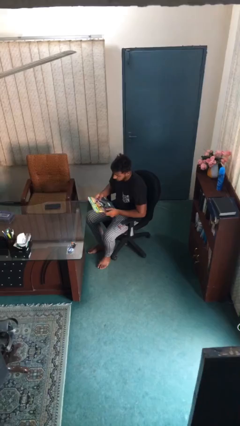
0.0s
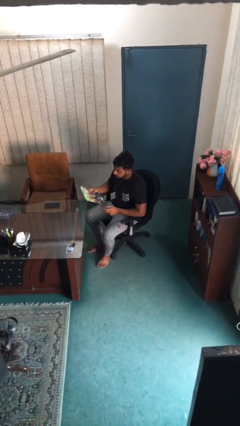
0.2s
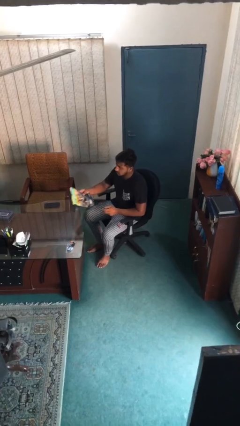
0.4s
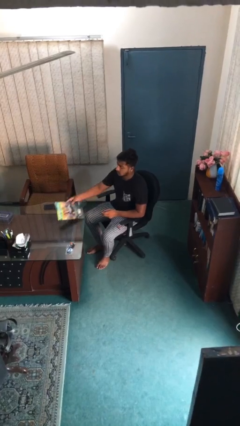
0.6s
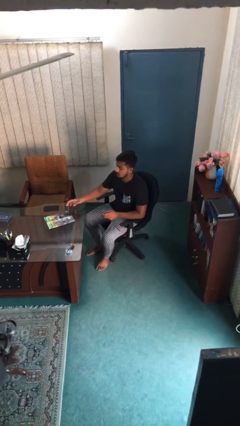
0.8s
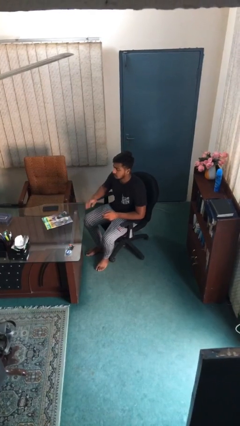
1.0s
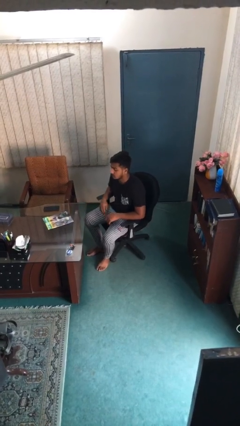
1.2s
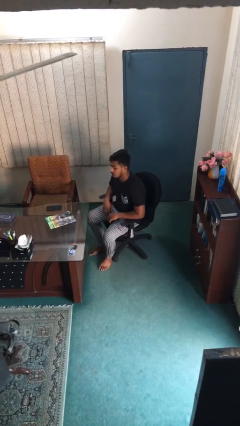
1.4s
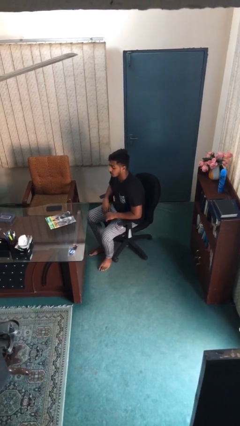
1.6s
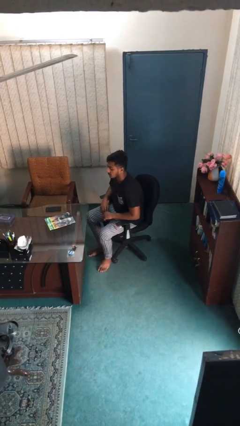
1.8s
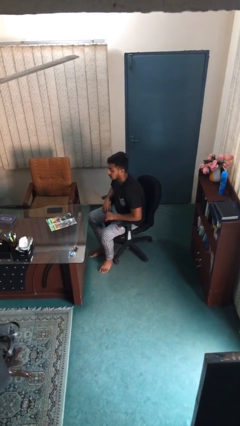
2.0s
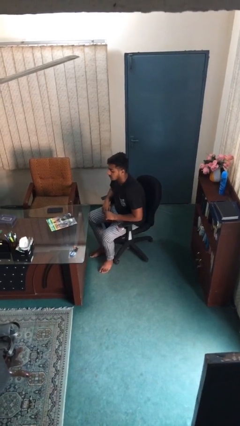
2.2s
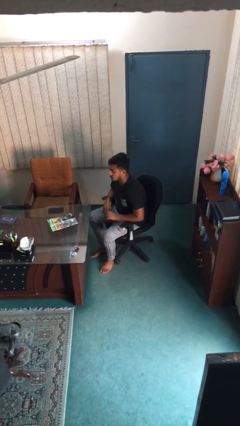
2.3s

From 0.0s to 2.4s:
person puts down object on table

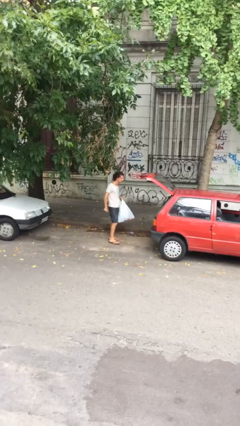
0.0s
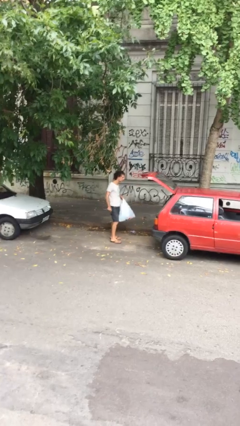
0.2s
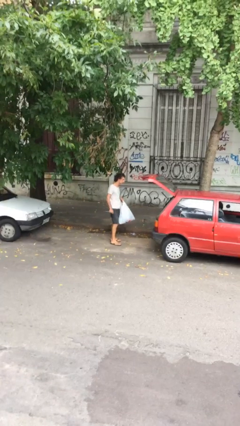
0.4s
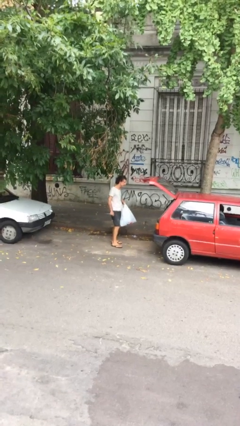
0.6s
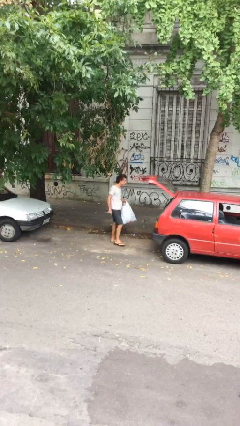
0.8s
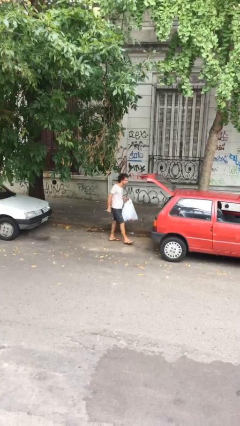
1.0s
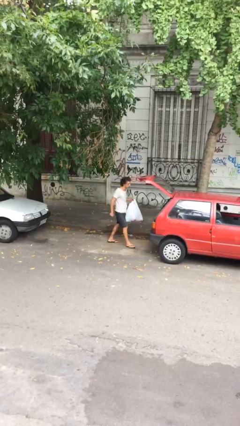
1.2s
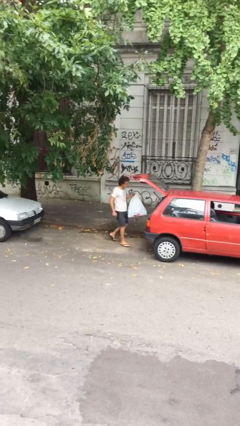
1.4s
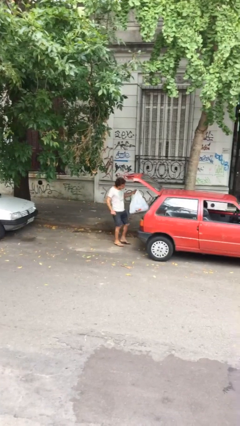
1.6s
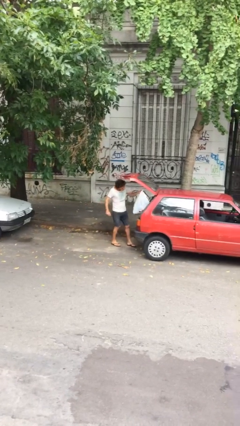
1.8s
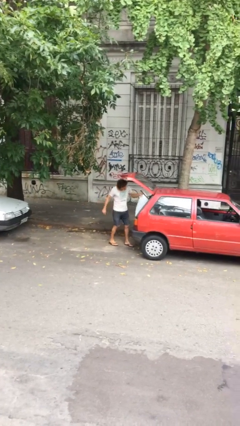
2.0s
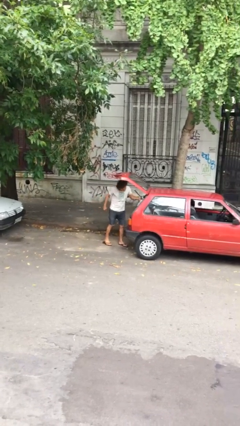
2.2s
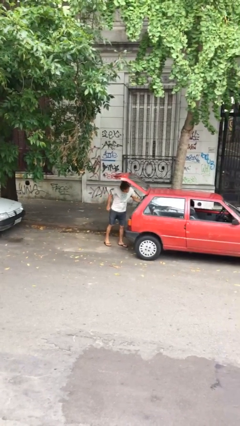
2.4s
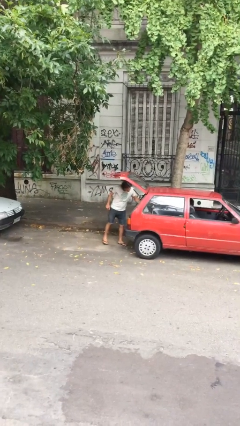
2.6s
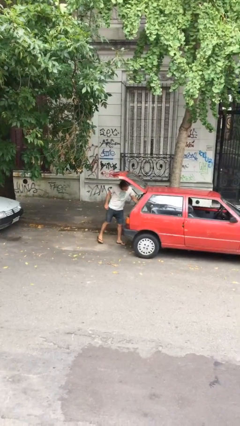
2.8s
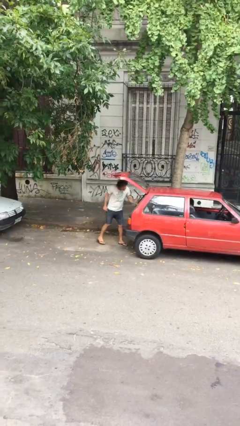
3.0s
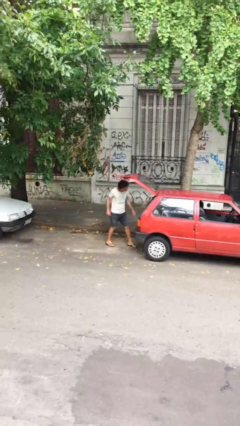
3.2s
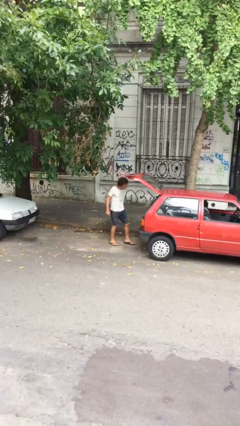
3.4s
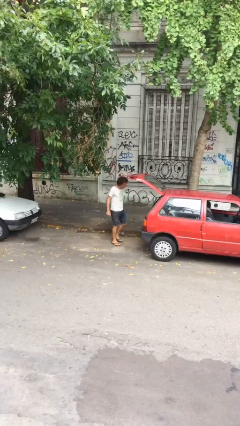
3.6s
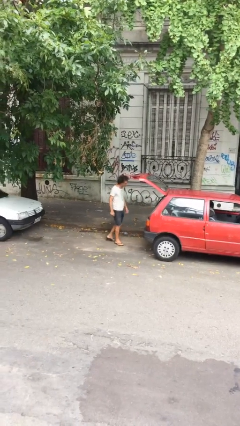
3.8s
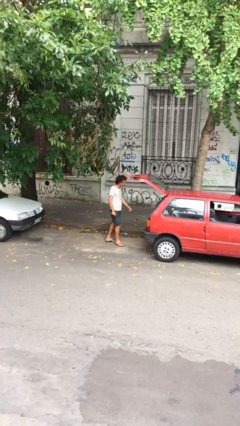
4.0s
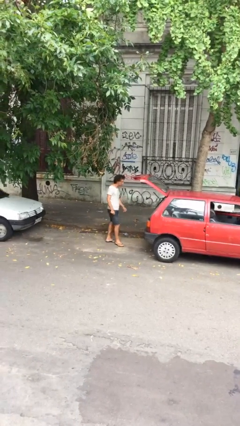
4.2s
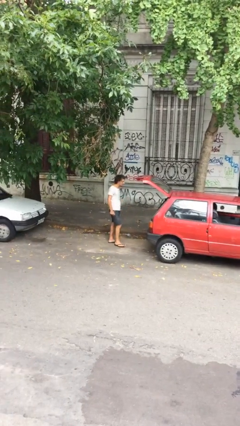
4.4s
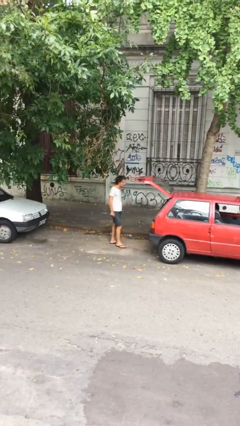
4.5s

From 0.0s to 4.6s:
person loads car

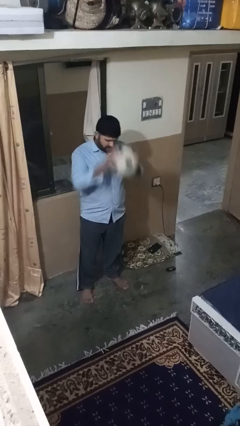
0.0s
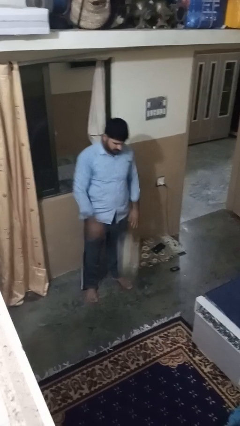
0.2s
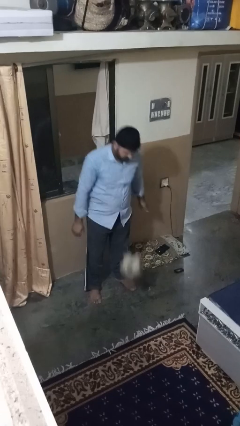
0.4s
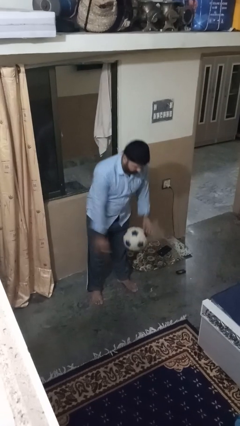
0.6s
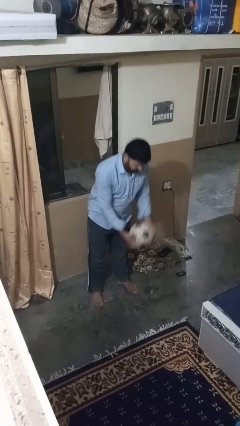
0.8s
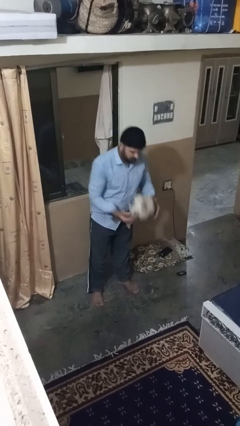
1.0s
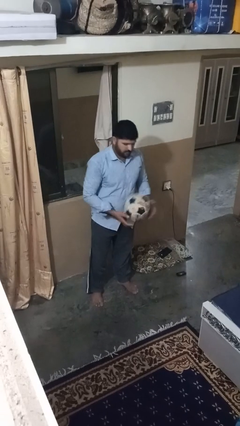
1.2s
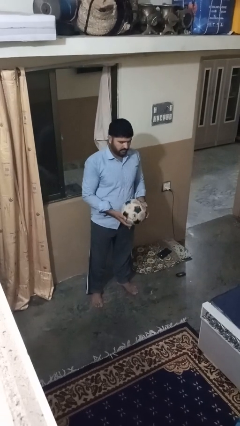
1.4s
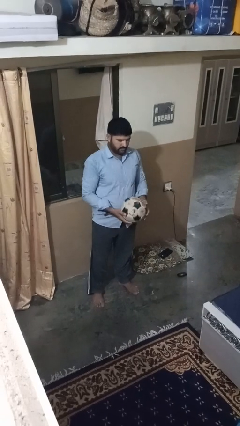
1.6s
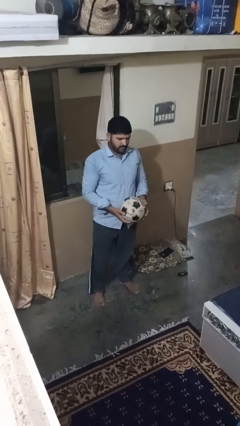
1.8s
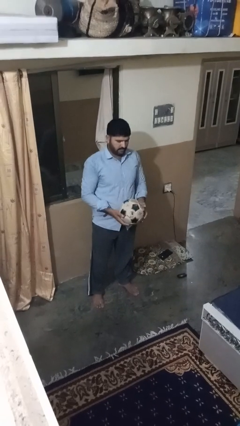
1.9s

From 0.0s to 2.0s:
person bounces ball on floor

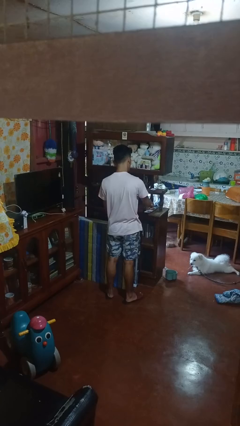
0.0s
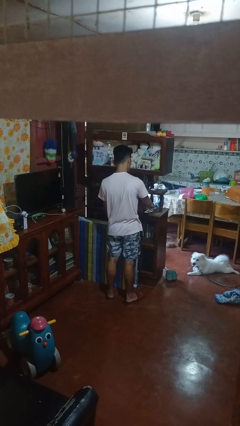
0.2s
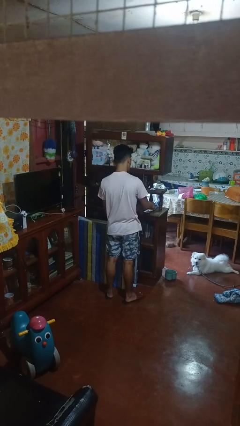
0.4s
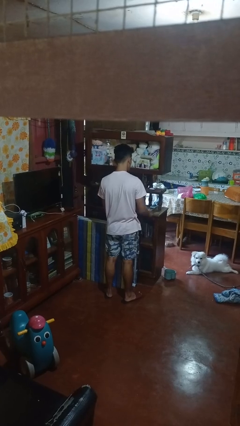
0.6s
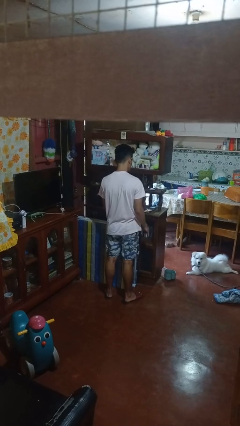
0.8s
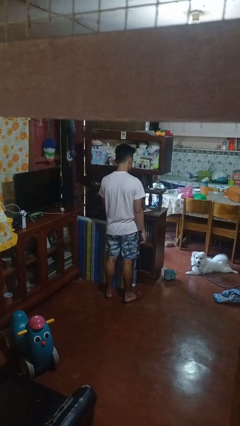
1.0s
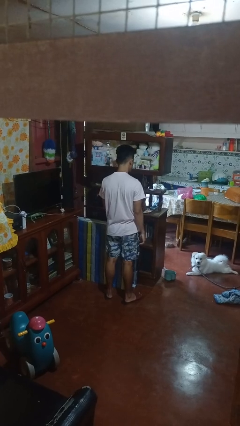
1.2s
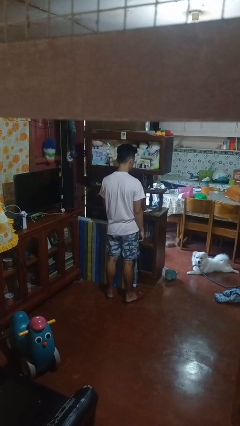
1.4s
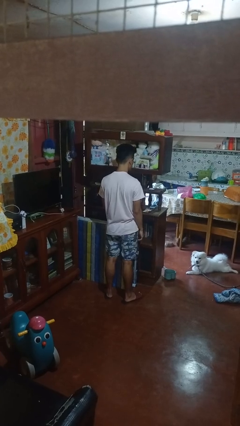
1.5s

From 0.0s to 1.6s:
person puts down object on shelf

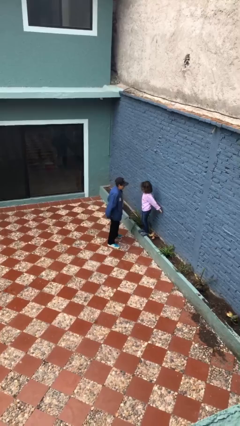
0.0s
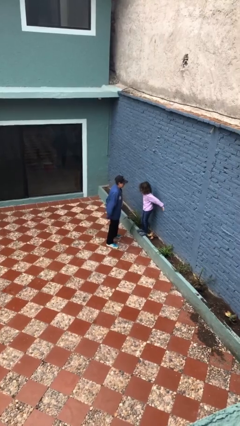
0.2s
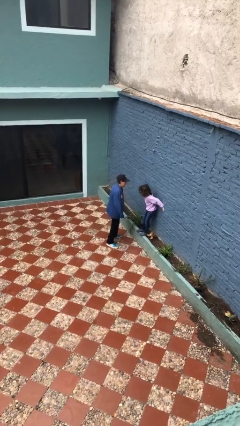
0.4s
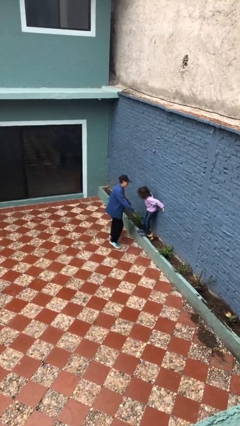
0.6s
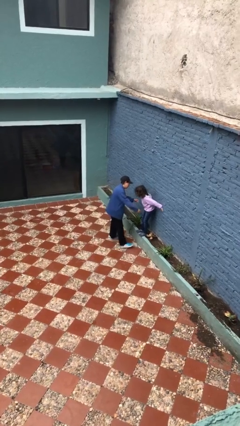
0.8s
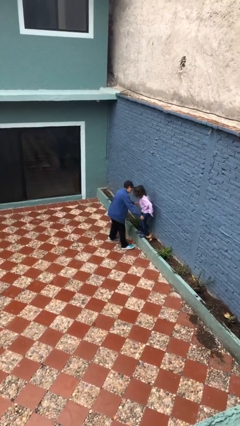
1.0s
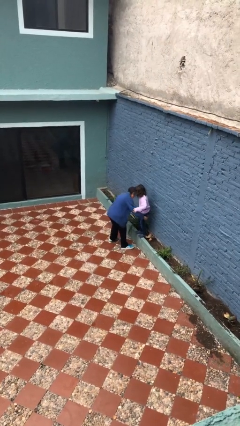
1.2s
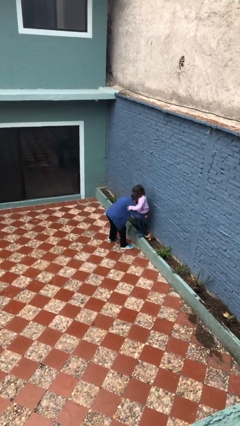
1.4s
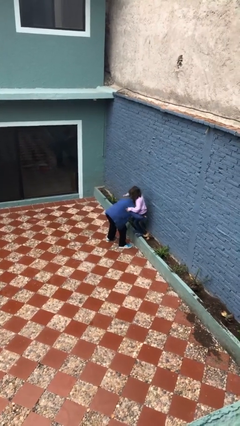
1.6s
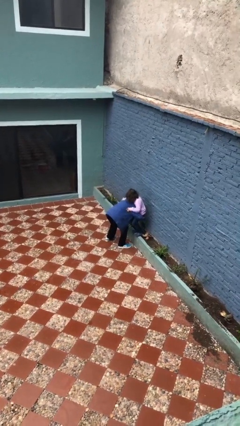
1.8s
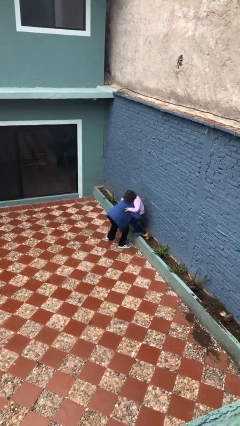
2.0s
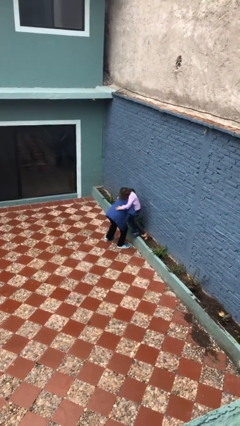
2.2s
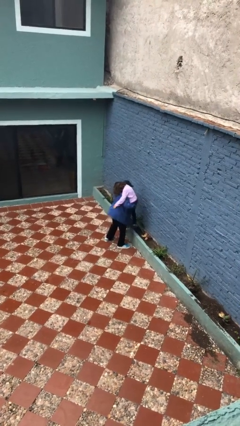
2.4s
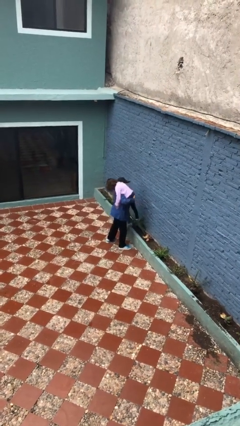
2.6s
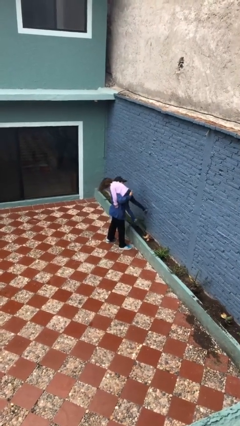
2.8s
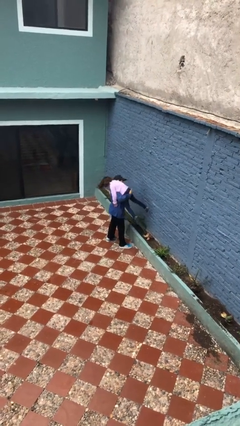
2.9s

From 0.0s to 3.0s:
person carries person over shoulder

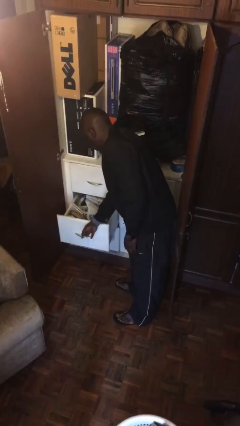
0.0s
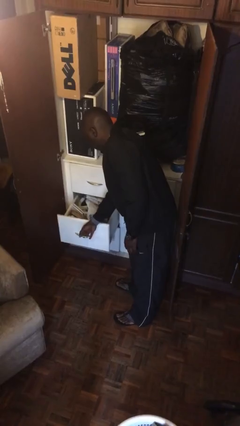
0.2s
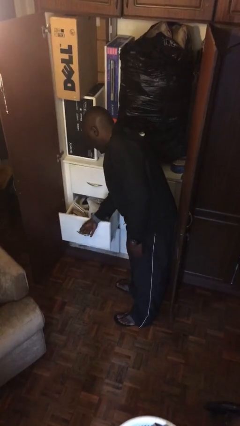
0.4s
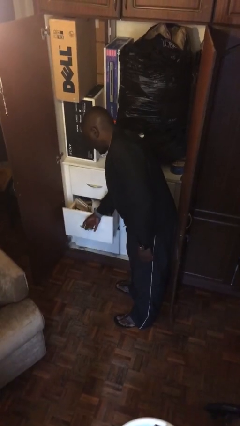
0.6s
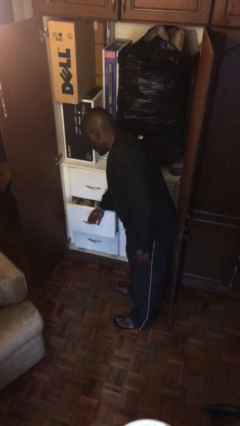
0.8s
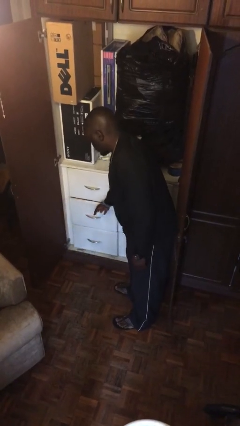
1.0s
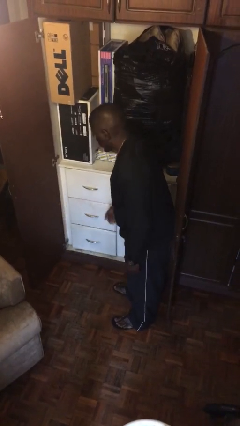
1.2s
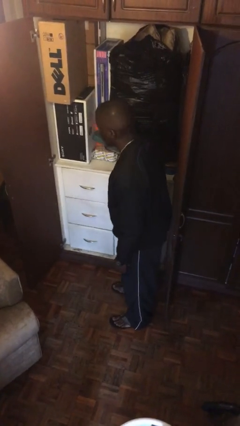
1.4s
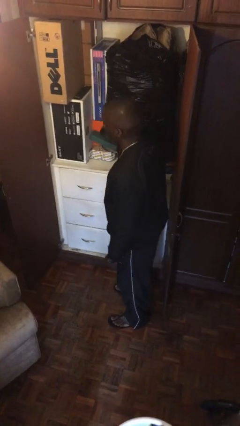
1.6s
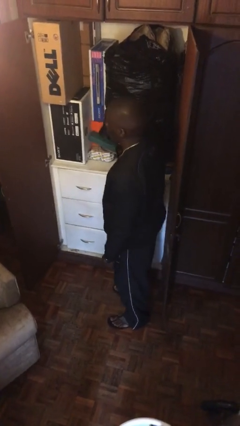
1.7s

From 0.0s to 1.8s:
person closes dresser drawer

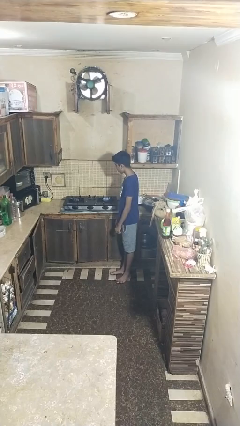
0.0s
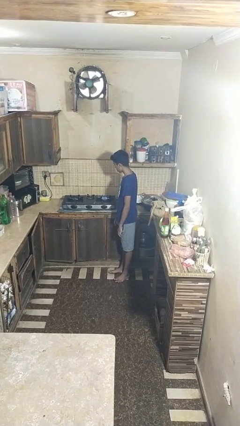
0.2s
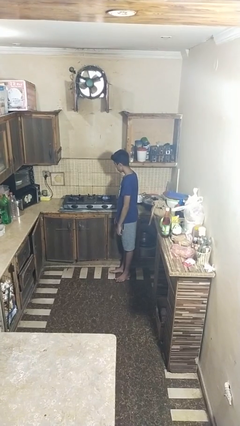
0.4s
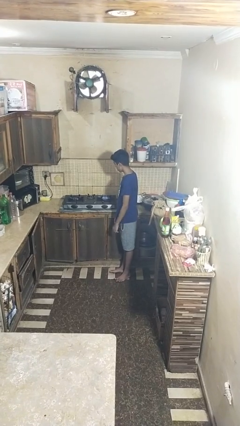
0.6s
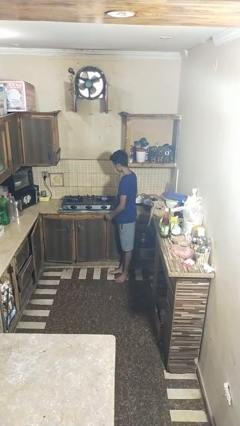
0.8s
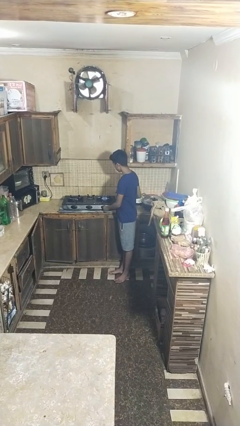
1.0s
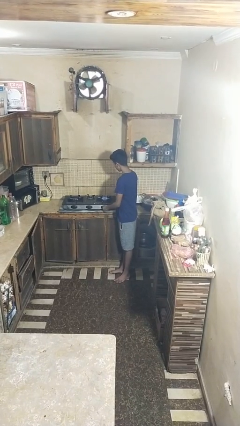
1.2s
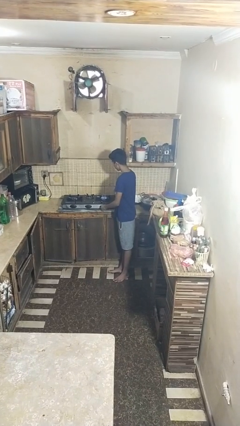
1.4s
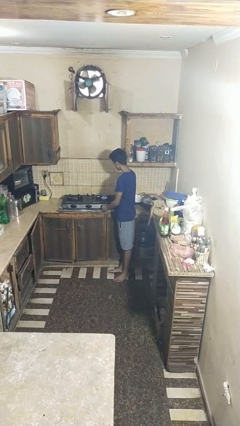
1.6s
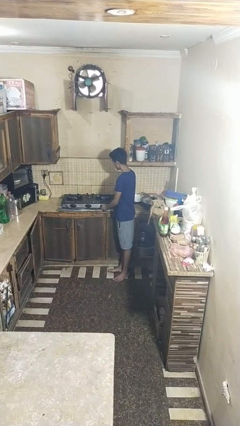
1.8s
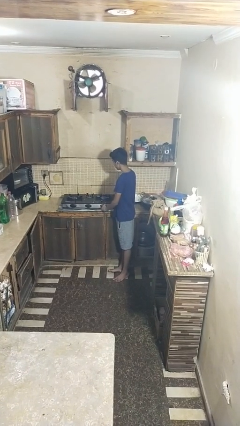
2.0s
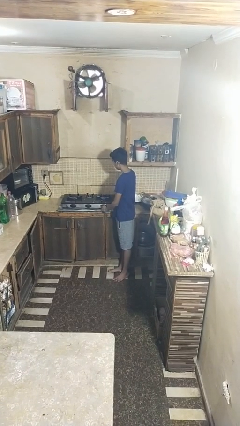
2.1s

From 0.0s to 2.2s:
person turns off stovetop
